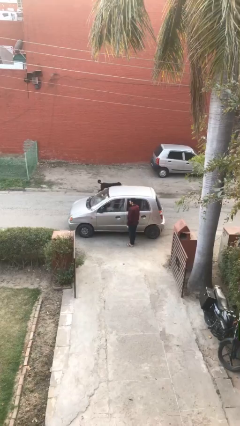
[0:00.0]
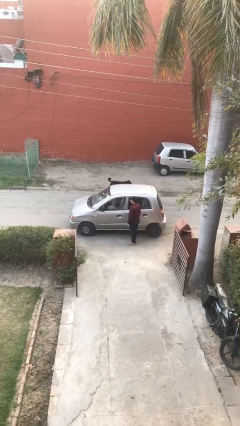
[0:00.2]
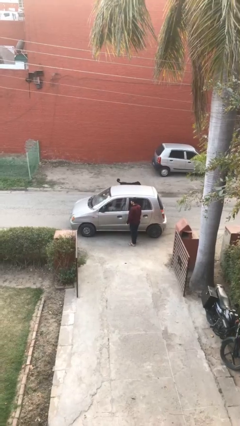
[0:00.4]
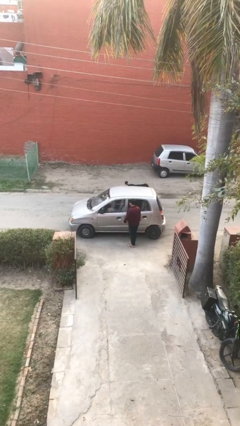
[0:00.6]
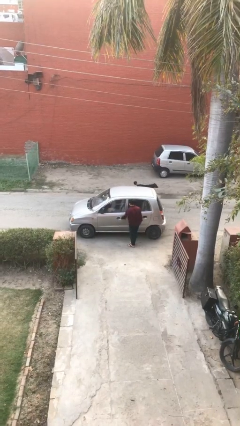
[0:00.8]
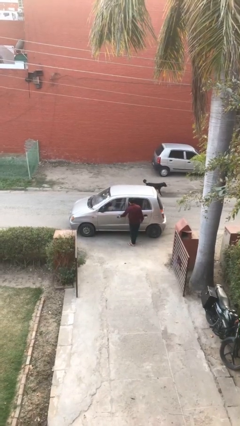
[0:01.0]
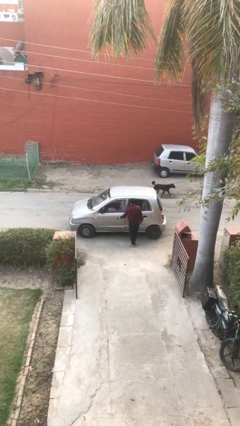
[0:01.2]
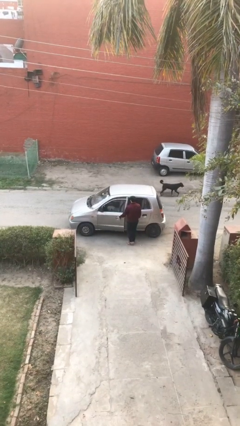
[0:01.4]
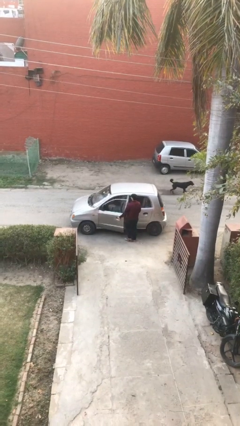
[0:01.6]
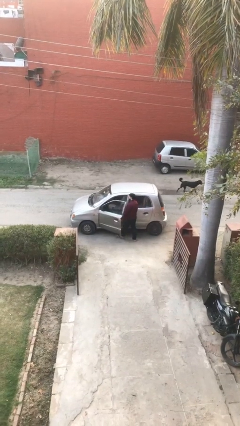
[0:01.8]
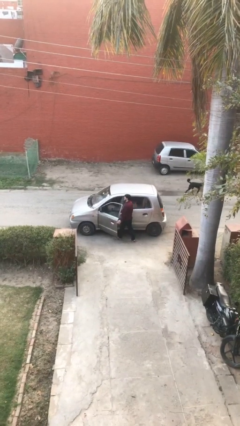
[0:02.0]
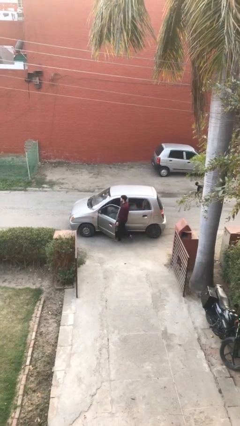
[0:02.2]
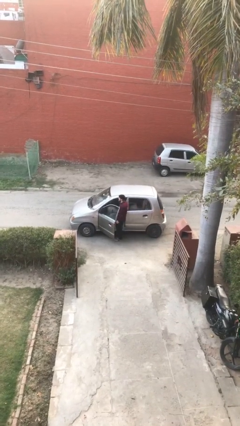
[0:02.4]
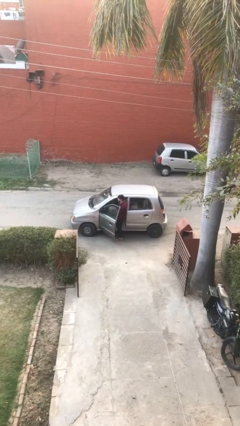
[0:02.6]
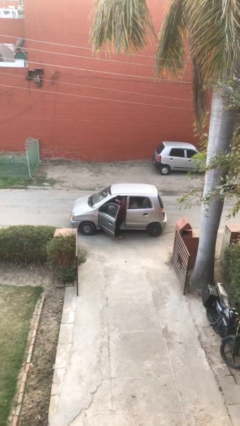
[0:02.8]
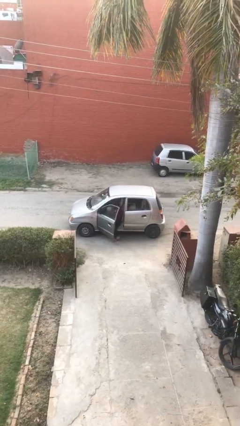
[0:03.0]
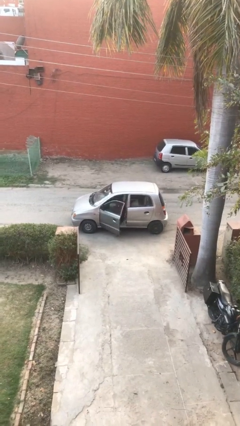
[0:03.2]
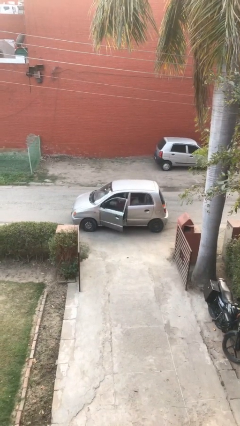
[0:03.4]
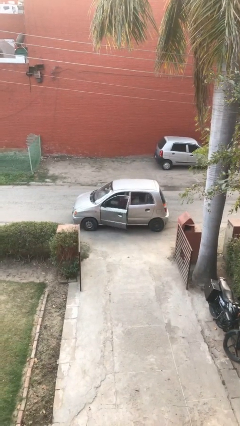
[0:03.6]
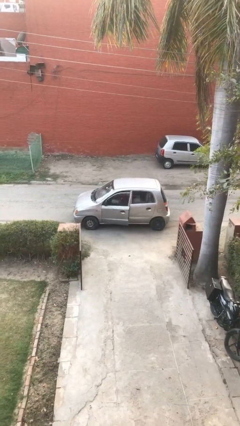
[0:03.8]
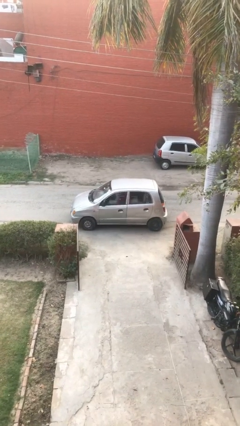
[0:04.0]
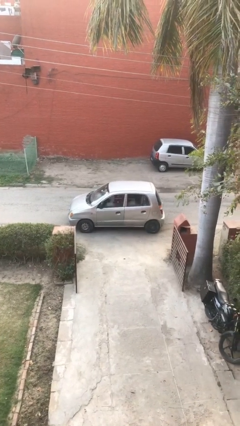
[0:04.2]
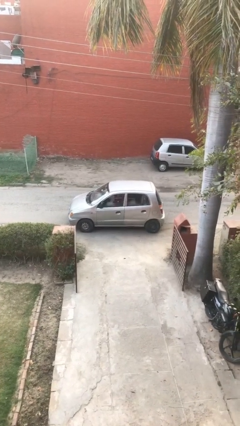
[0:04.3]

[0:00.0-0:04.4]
car picks up person

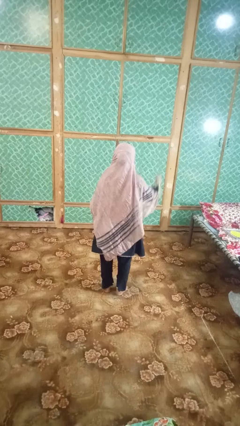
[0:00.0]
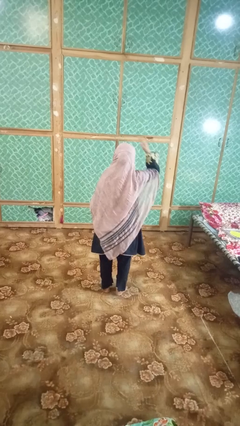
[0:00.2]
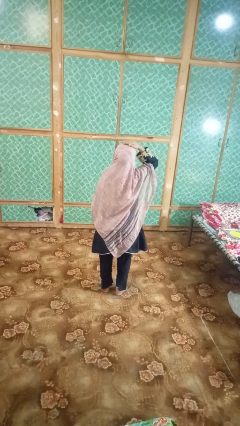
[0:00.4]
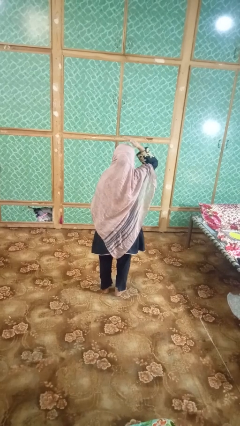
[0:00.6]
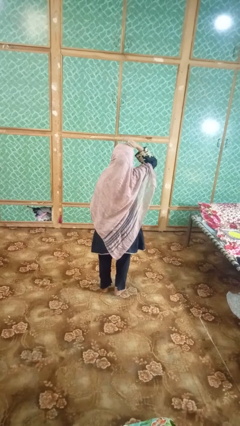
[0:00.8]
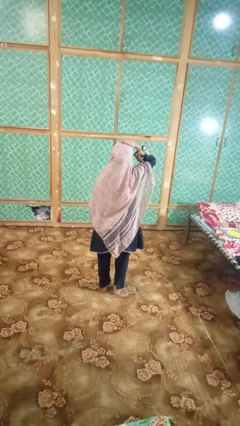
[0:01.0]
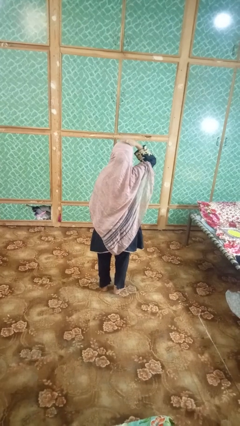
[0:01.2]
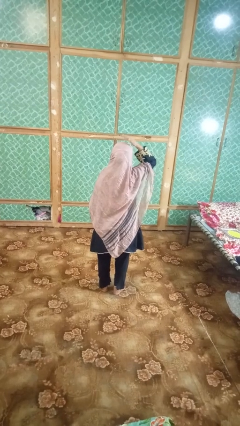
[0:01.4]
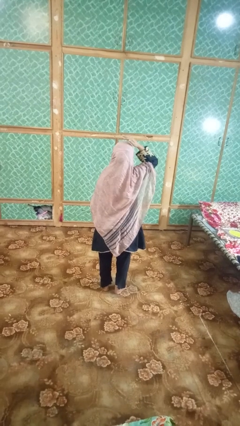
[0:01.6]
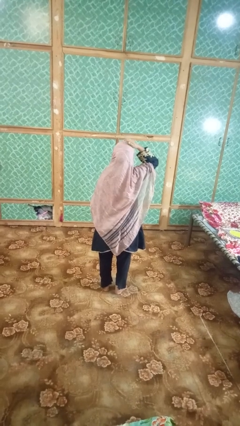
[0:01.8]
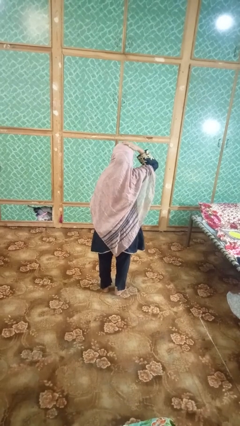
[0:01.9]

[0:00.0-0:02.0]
person pats head

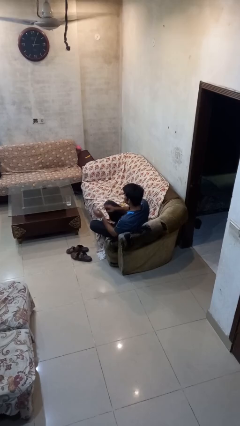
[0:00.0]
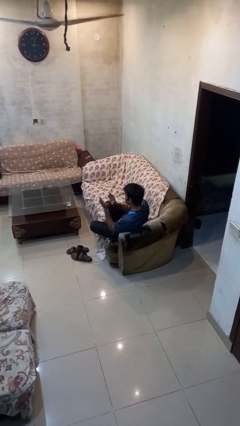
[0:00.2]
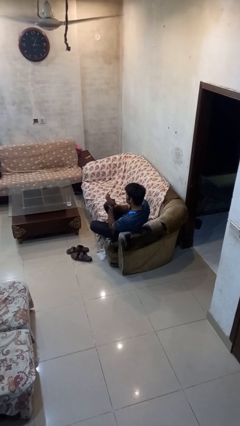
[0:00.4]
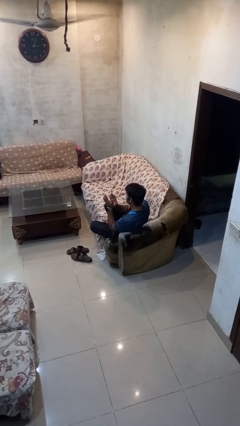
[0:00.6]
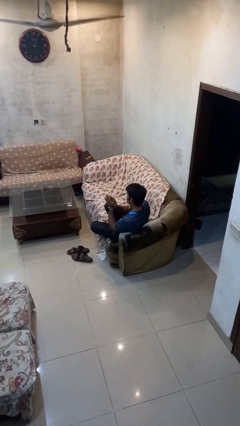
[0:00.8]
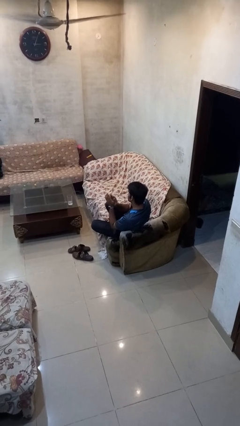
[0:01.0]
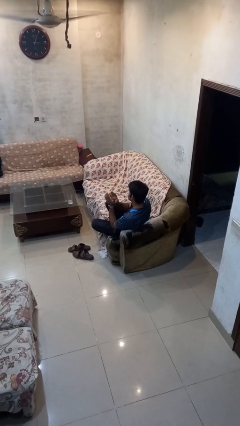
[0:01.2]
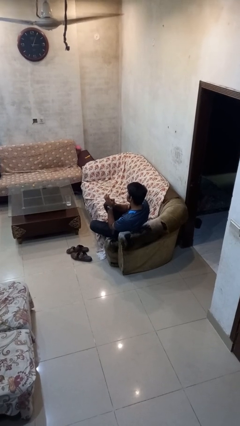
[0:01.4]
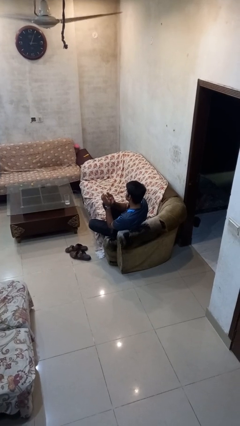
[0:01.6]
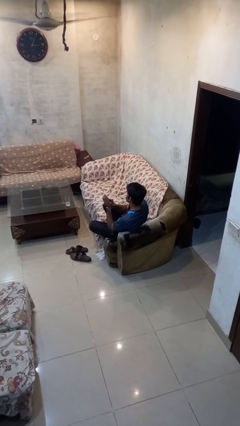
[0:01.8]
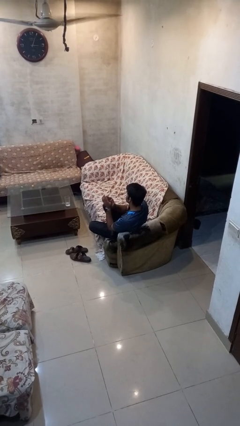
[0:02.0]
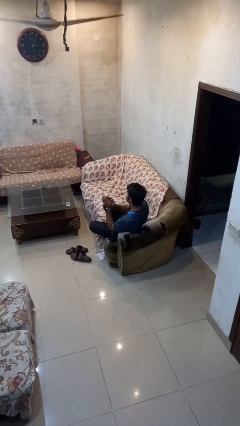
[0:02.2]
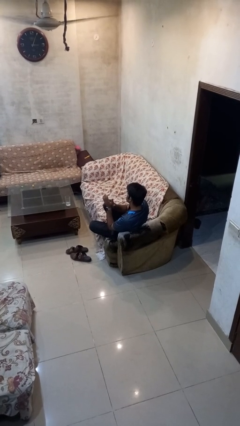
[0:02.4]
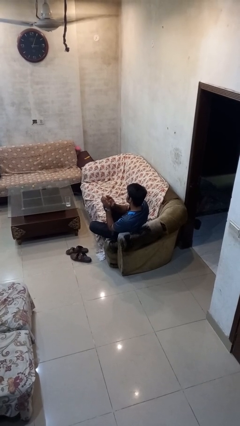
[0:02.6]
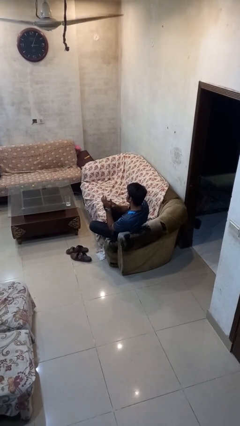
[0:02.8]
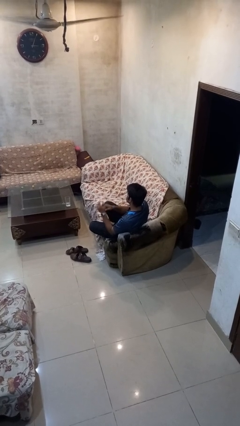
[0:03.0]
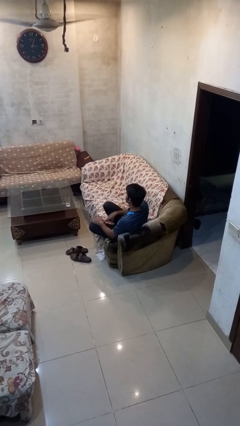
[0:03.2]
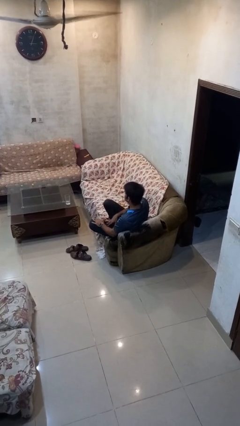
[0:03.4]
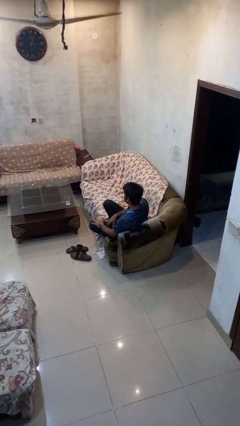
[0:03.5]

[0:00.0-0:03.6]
person claps hands

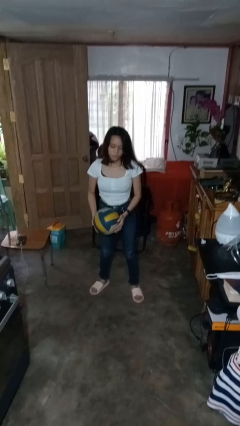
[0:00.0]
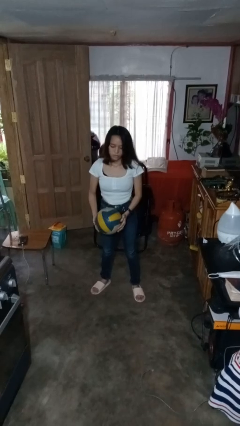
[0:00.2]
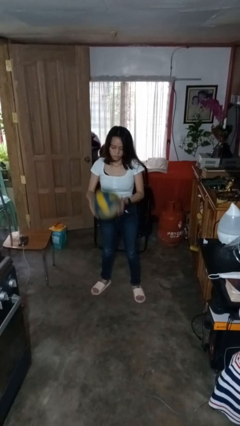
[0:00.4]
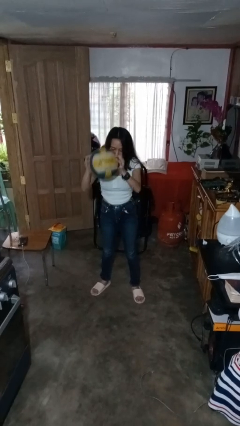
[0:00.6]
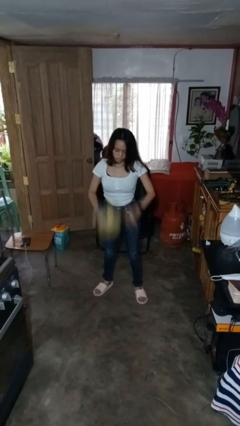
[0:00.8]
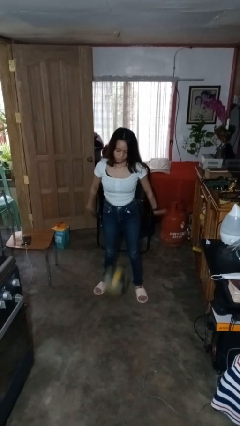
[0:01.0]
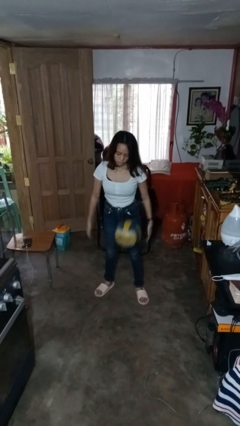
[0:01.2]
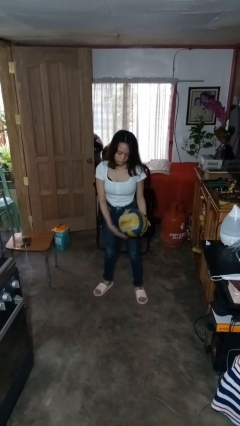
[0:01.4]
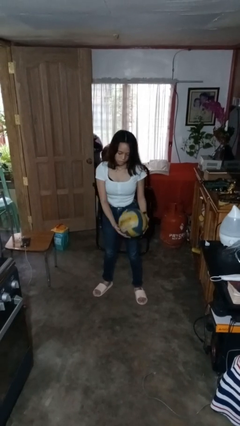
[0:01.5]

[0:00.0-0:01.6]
person bounces ball on floor

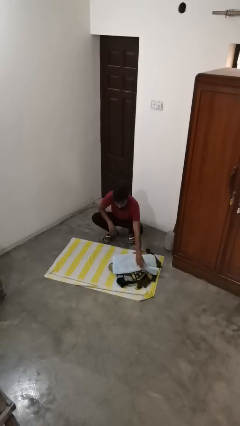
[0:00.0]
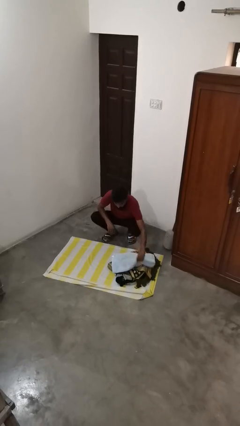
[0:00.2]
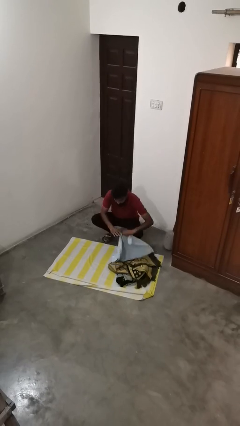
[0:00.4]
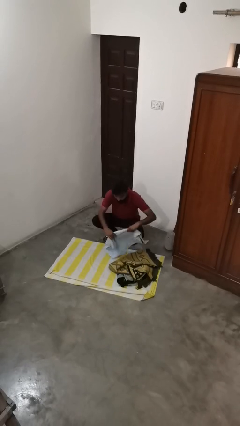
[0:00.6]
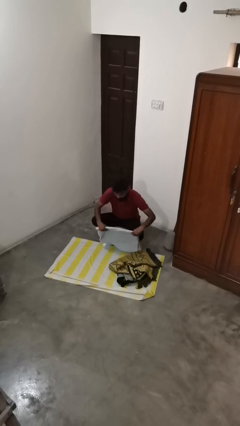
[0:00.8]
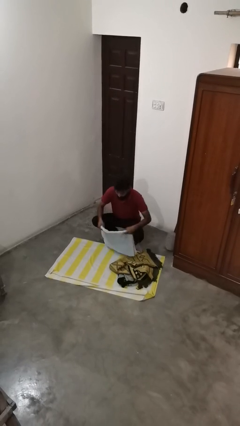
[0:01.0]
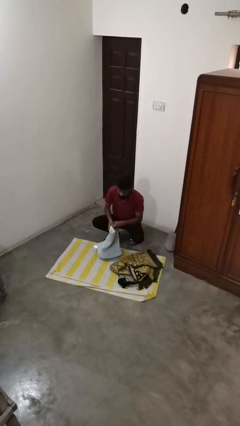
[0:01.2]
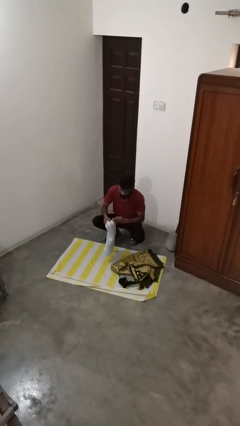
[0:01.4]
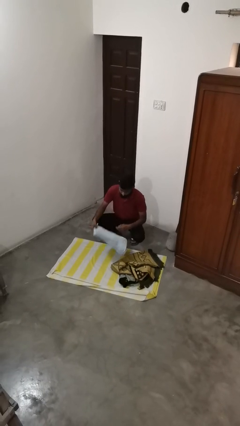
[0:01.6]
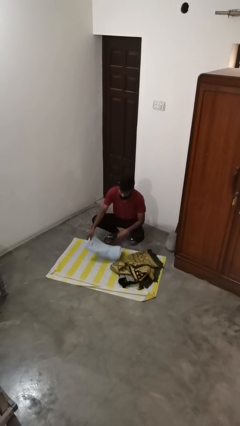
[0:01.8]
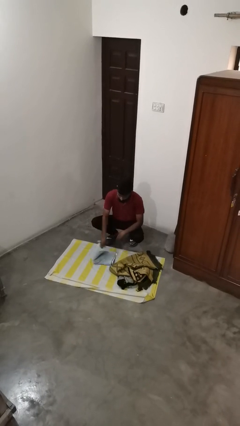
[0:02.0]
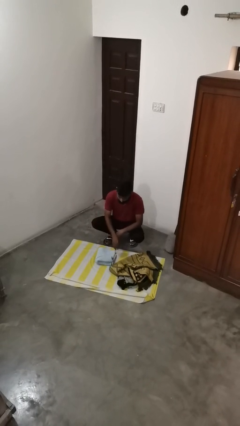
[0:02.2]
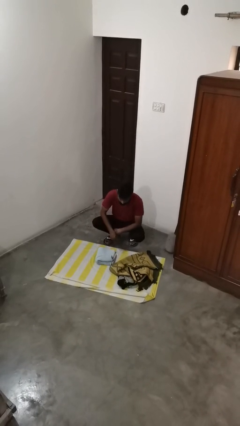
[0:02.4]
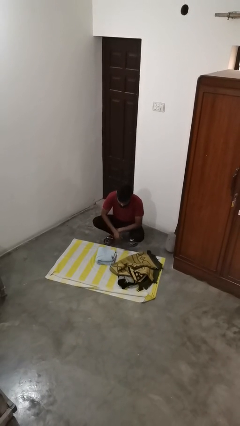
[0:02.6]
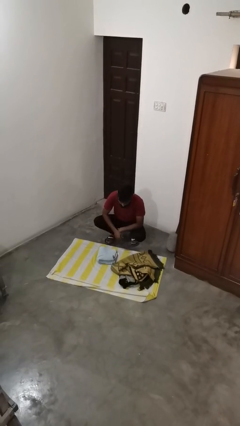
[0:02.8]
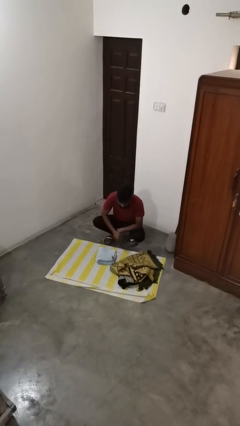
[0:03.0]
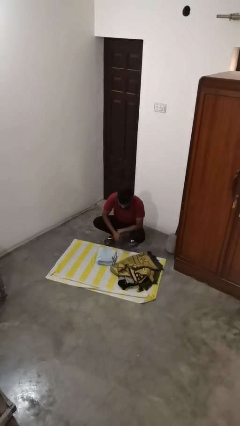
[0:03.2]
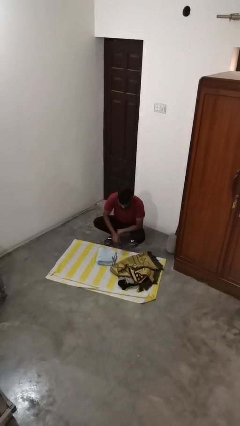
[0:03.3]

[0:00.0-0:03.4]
person folds towel

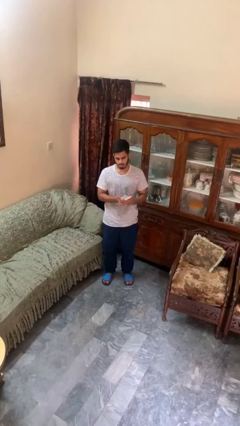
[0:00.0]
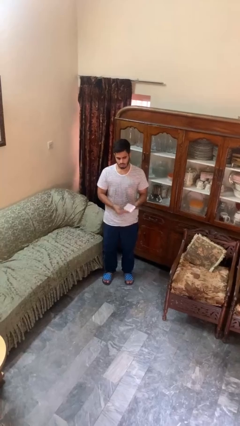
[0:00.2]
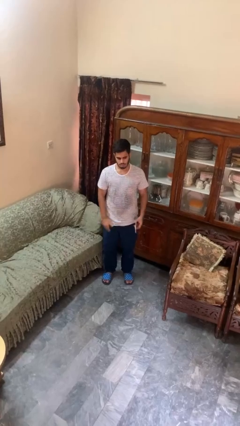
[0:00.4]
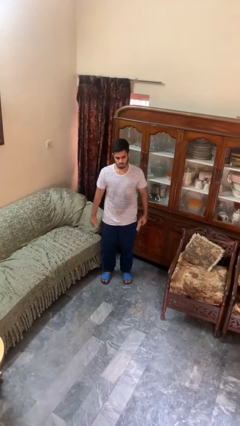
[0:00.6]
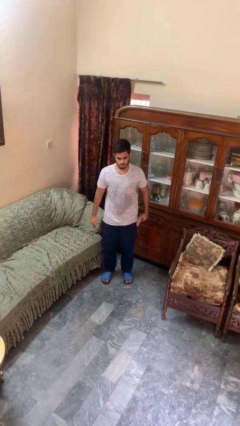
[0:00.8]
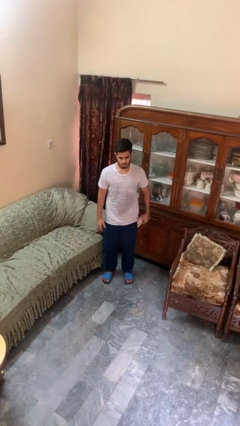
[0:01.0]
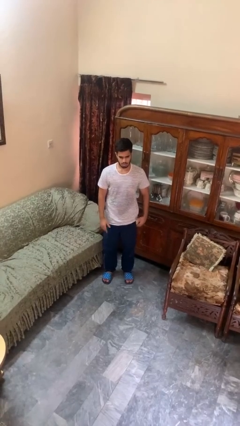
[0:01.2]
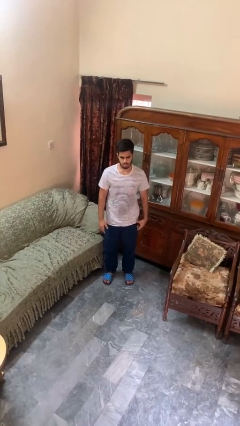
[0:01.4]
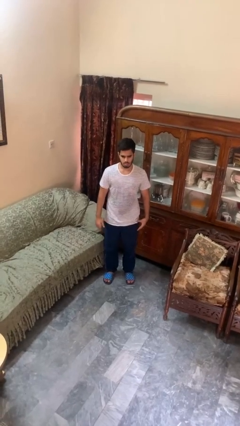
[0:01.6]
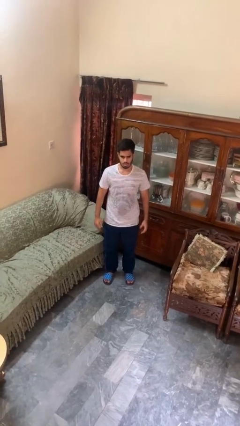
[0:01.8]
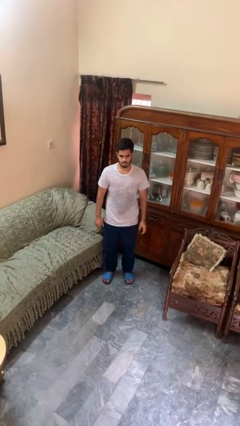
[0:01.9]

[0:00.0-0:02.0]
person puts phone into pocket
